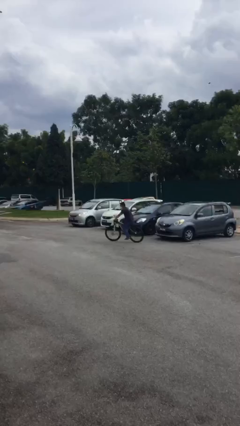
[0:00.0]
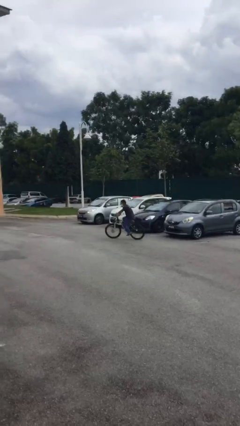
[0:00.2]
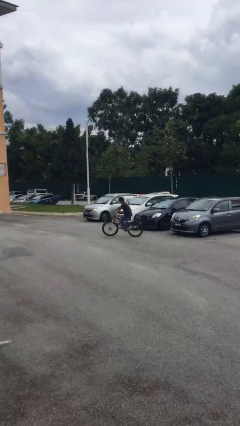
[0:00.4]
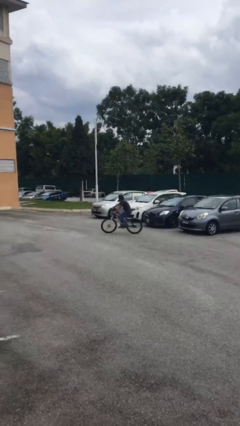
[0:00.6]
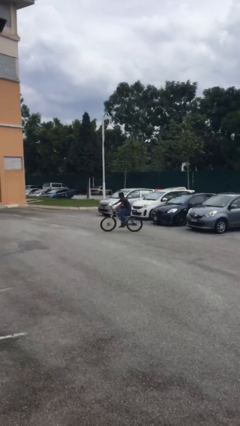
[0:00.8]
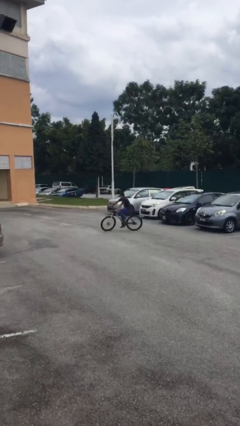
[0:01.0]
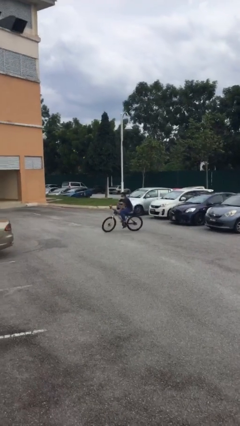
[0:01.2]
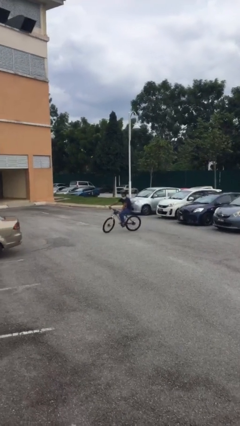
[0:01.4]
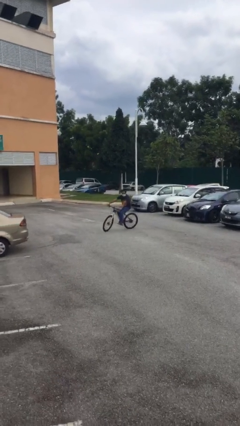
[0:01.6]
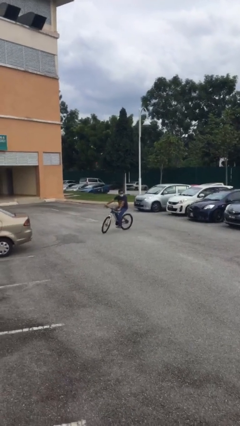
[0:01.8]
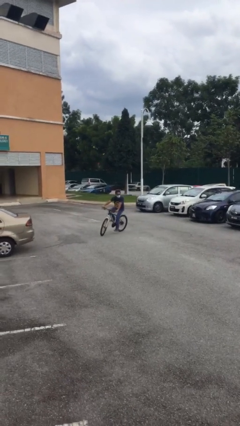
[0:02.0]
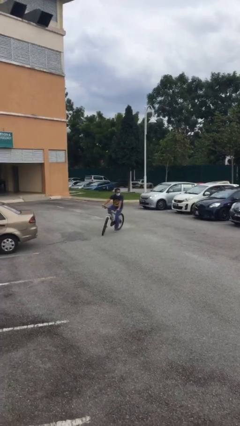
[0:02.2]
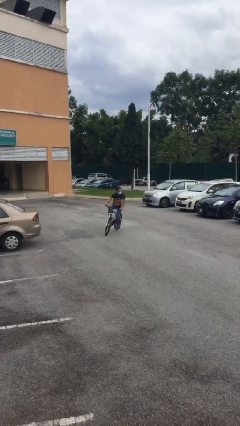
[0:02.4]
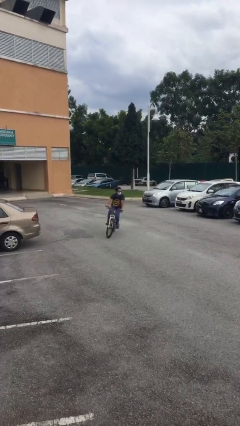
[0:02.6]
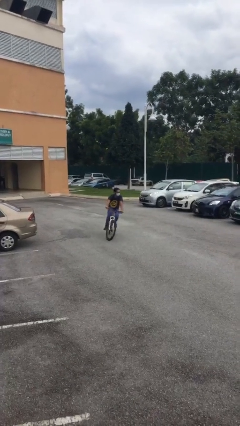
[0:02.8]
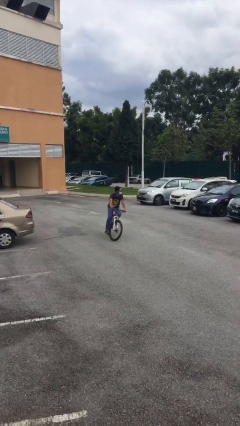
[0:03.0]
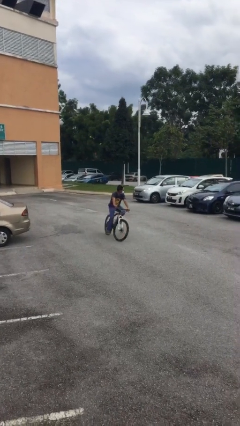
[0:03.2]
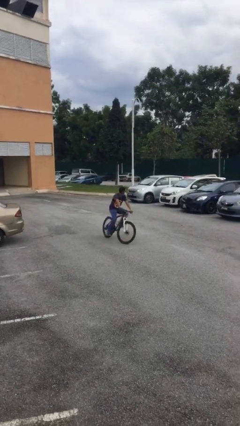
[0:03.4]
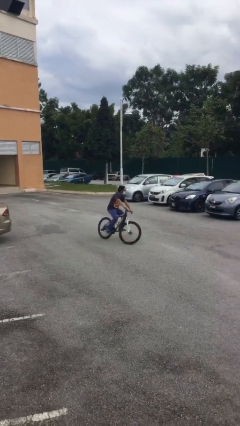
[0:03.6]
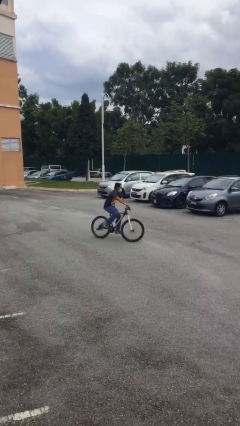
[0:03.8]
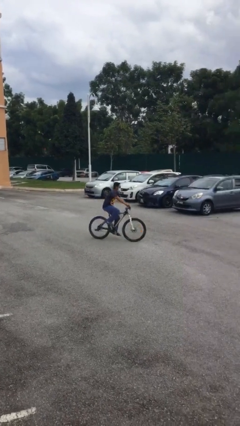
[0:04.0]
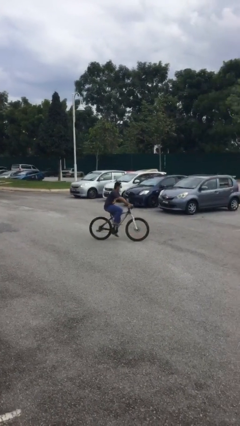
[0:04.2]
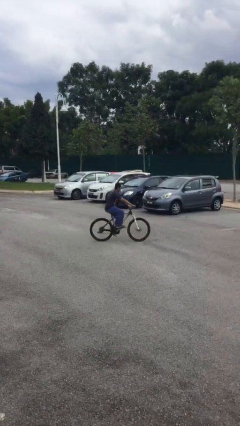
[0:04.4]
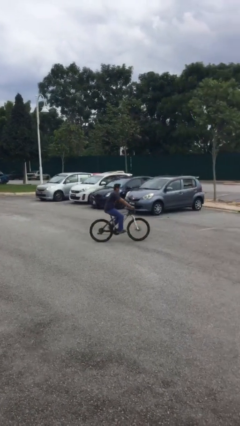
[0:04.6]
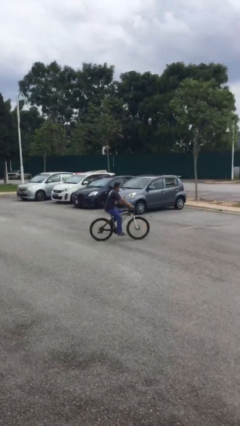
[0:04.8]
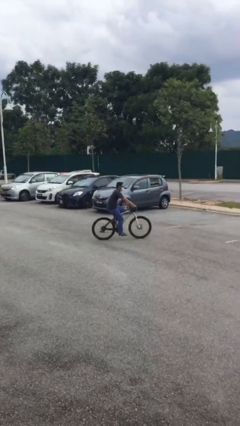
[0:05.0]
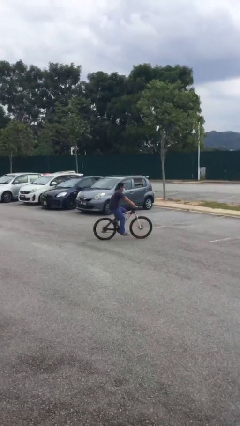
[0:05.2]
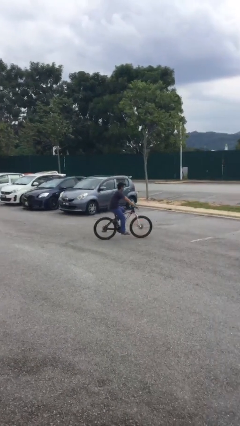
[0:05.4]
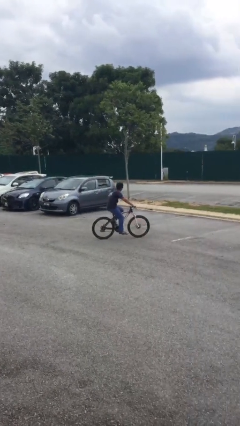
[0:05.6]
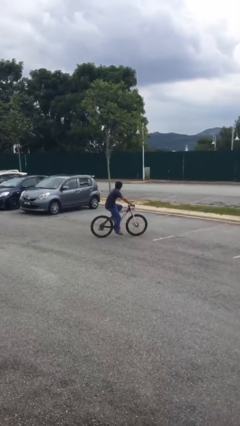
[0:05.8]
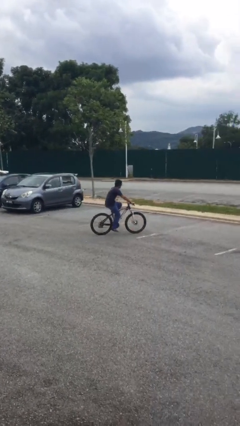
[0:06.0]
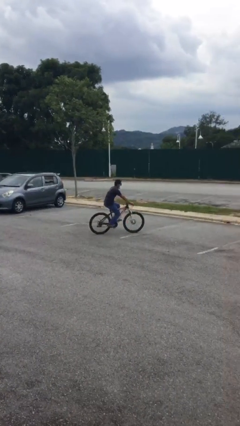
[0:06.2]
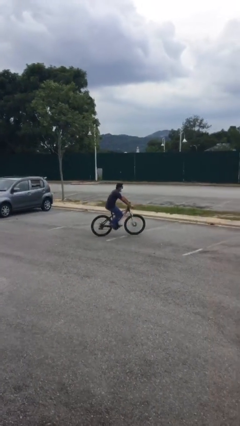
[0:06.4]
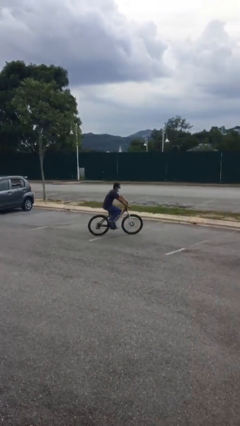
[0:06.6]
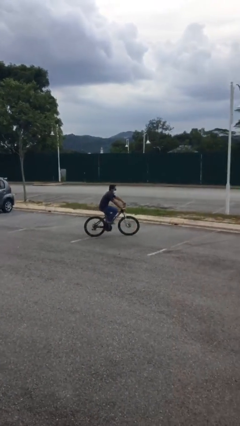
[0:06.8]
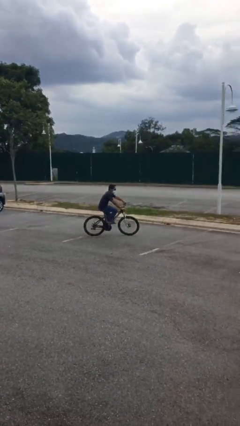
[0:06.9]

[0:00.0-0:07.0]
person rides bicycle

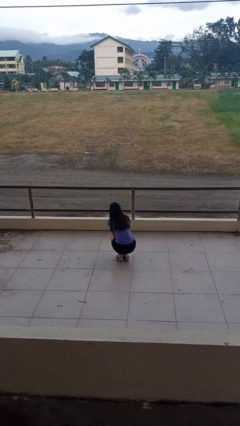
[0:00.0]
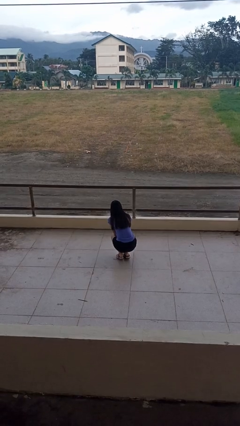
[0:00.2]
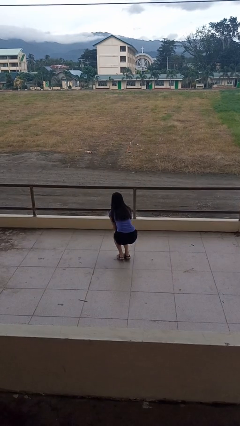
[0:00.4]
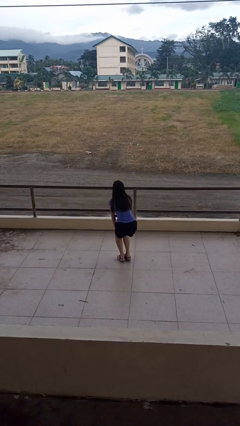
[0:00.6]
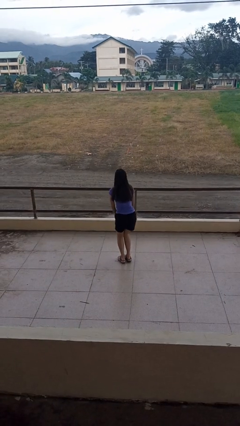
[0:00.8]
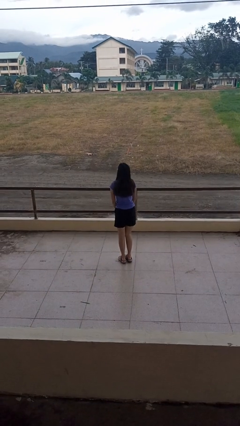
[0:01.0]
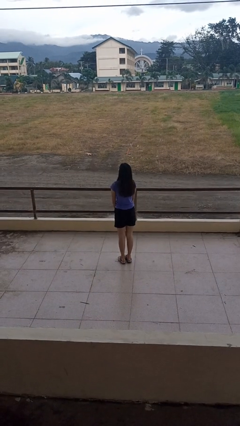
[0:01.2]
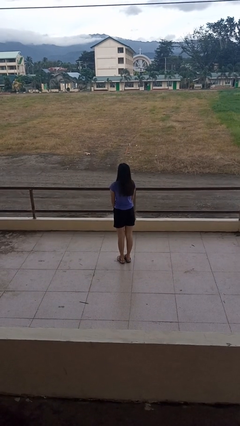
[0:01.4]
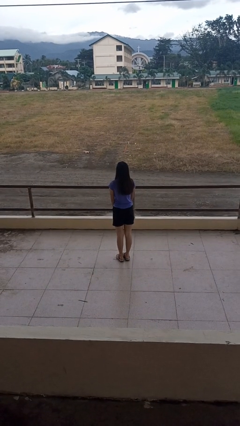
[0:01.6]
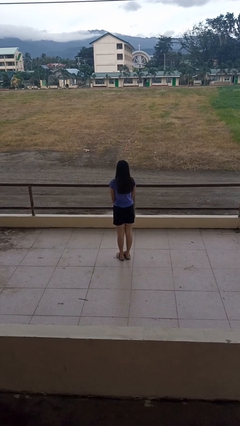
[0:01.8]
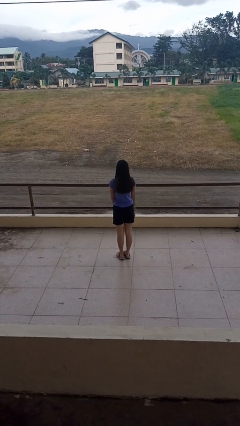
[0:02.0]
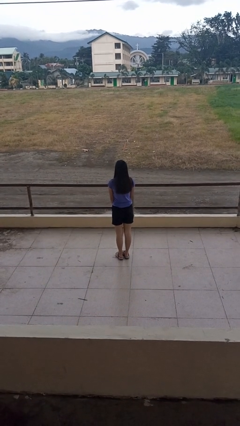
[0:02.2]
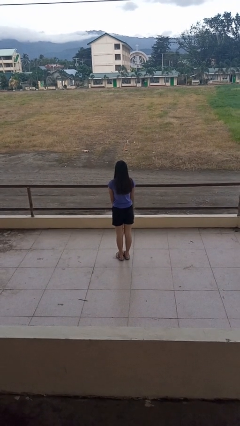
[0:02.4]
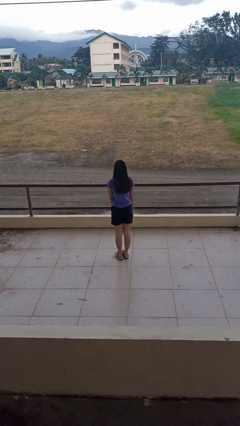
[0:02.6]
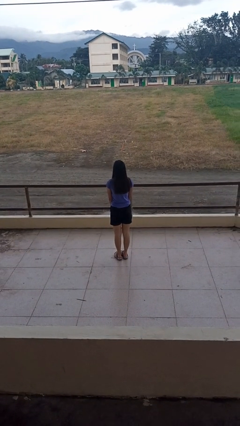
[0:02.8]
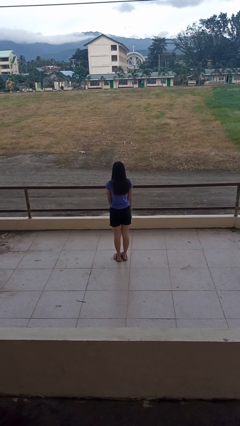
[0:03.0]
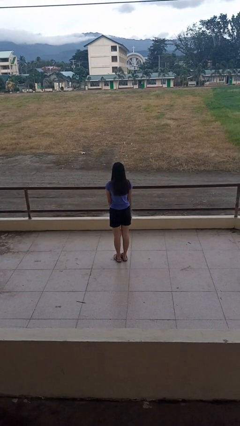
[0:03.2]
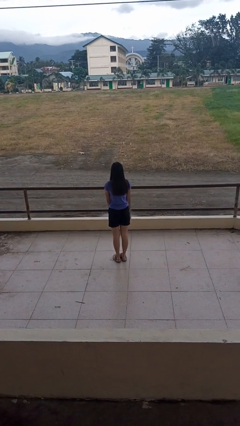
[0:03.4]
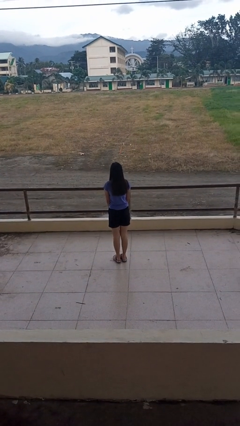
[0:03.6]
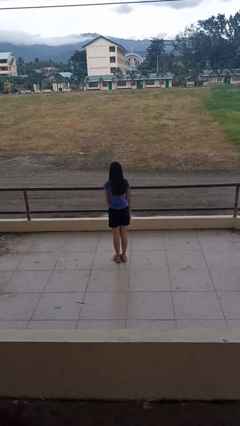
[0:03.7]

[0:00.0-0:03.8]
person stands up

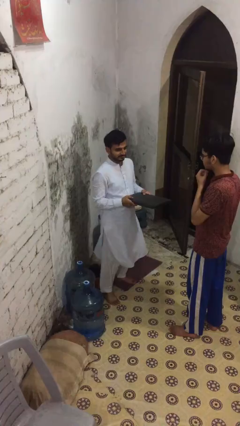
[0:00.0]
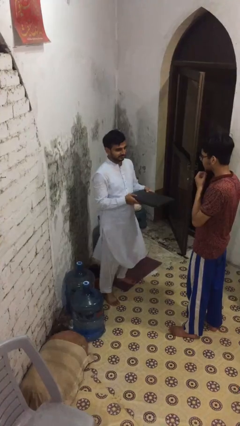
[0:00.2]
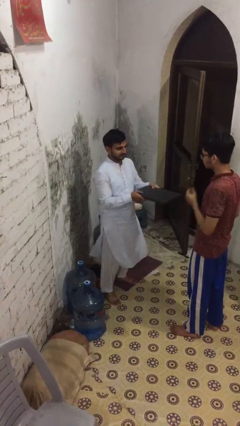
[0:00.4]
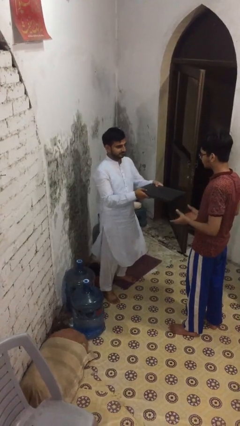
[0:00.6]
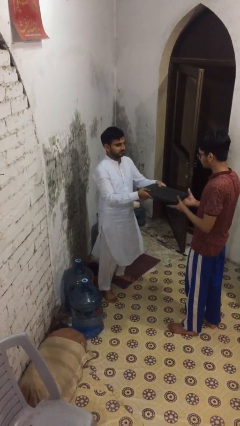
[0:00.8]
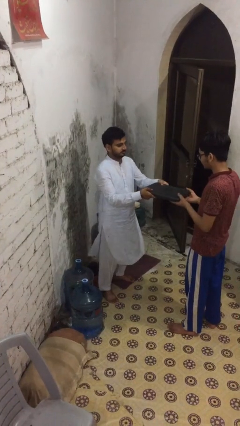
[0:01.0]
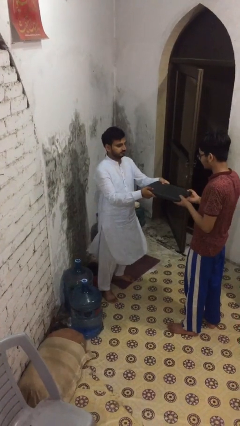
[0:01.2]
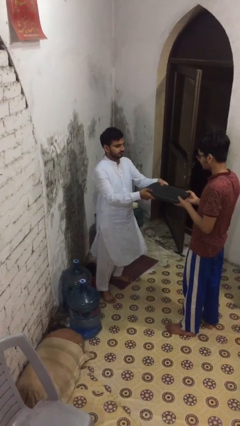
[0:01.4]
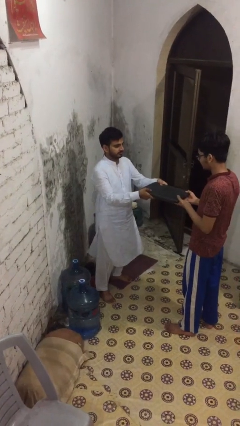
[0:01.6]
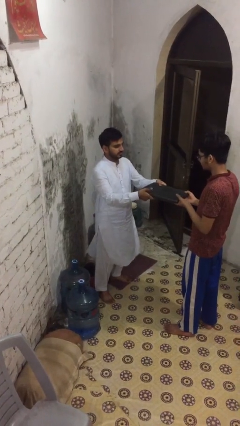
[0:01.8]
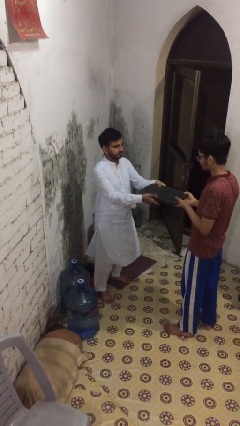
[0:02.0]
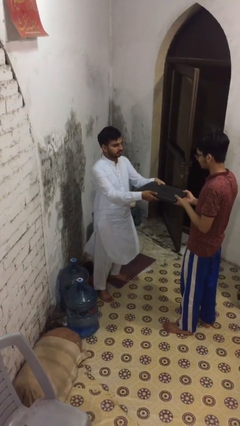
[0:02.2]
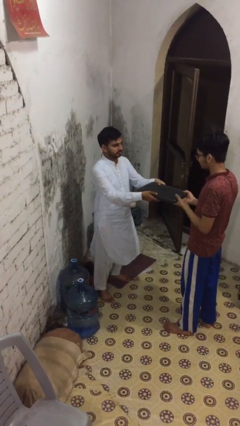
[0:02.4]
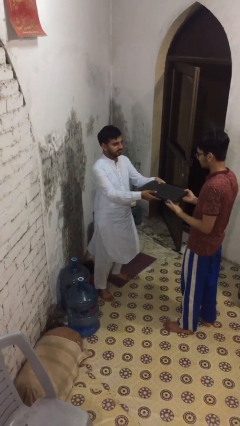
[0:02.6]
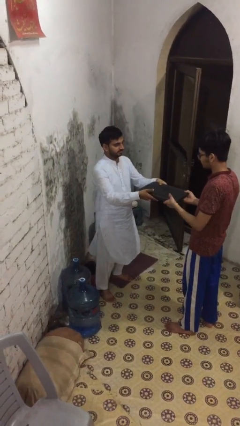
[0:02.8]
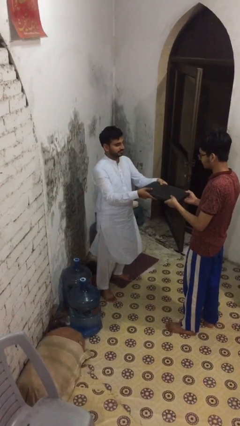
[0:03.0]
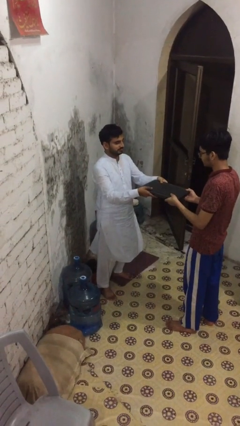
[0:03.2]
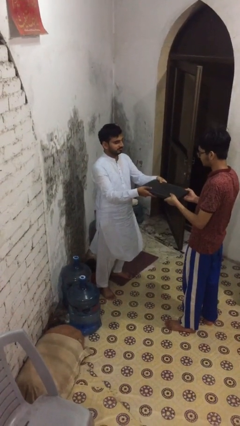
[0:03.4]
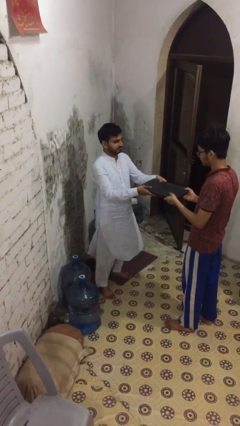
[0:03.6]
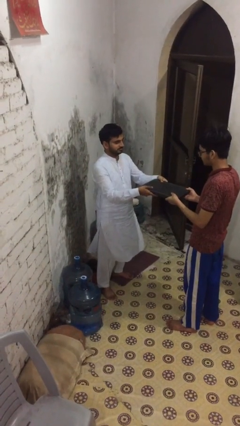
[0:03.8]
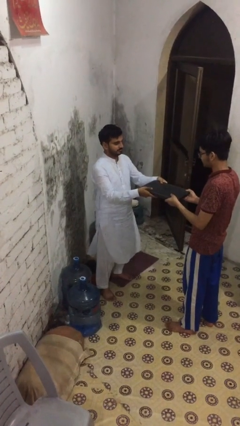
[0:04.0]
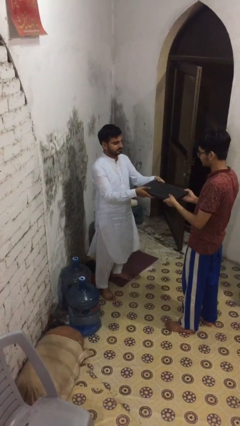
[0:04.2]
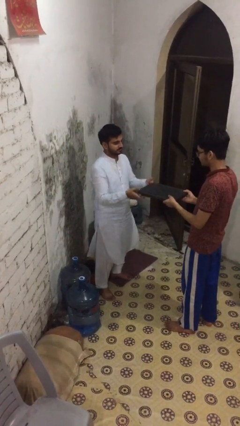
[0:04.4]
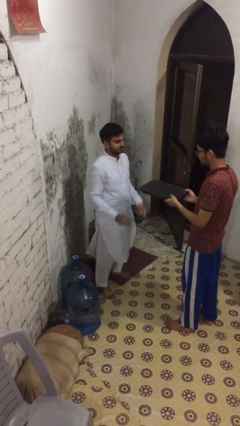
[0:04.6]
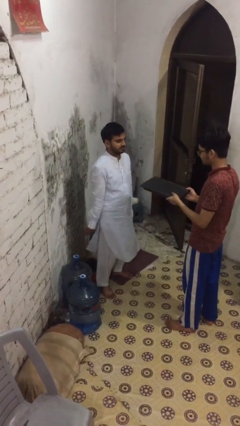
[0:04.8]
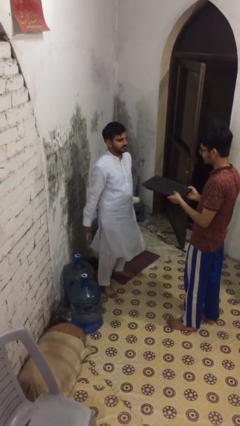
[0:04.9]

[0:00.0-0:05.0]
person transfers object to person

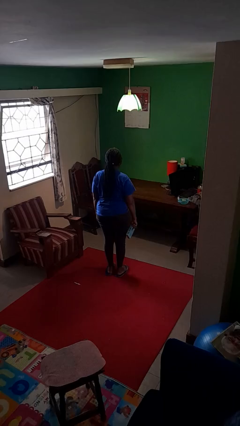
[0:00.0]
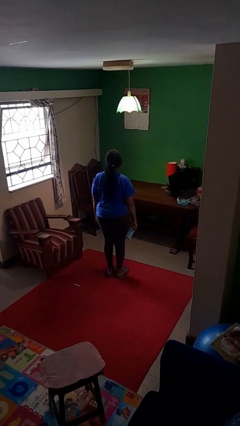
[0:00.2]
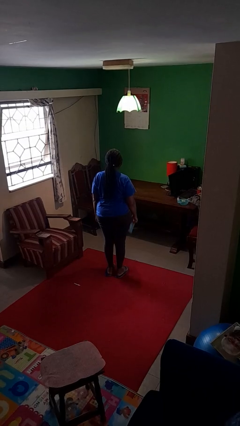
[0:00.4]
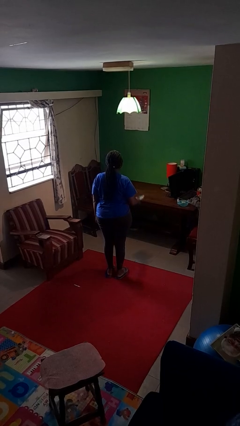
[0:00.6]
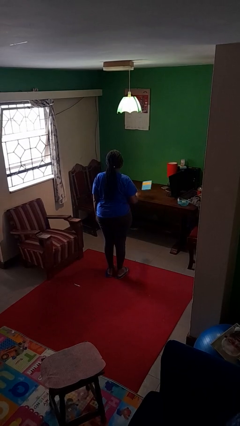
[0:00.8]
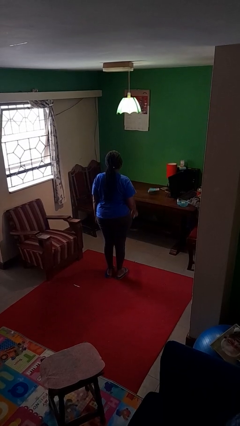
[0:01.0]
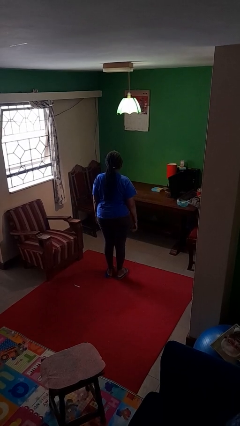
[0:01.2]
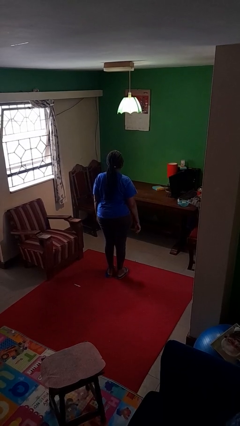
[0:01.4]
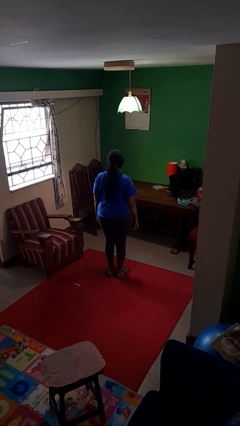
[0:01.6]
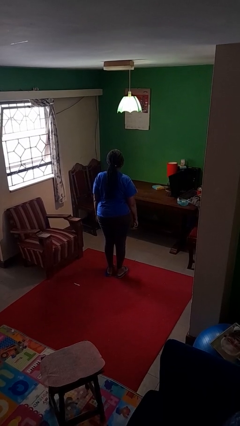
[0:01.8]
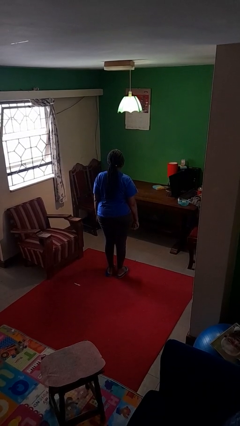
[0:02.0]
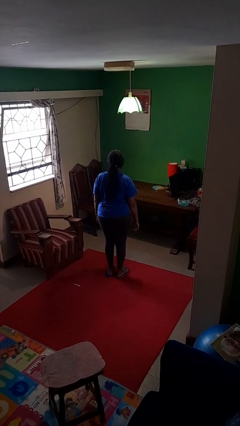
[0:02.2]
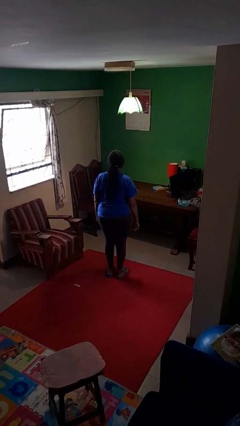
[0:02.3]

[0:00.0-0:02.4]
person throws object on table
